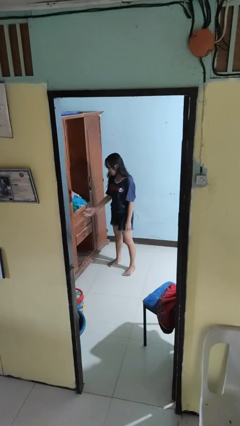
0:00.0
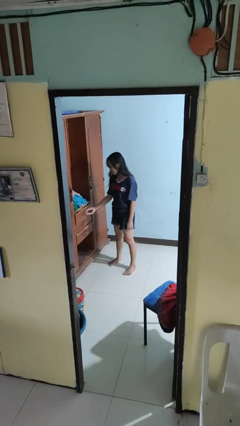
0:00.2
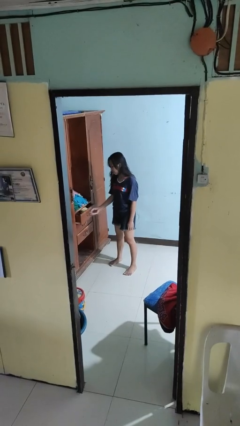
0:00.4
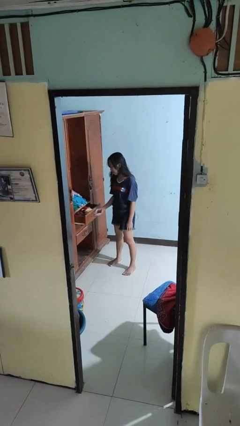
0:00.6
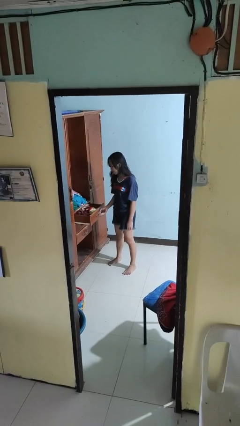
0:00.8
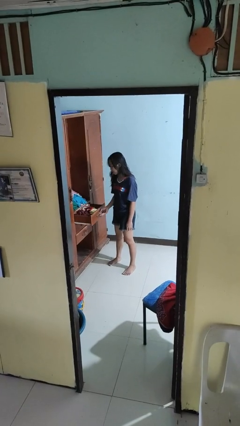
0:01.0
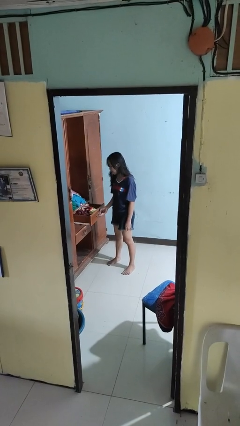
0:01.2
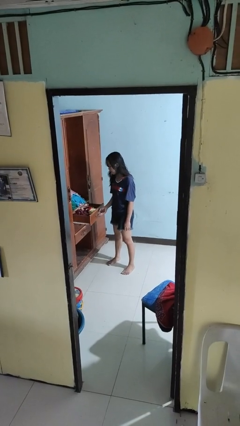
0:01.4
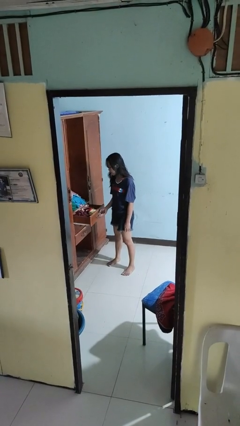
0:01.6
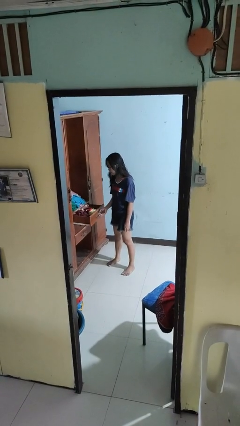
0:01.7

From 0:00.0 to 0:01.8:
person opens dresser drawer

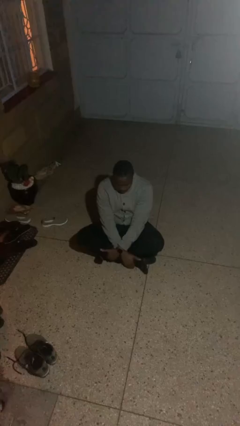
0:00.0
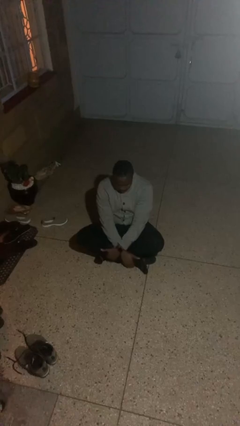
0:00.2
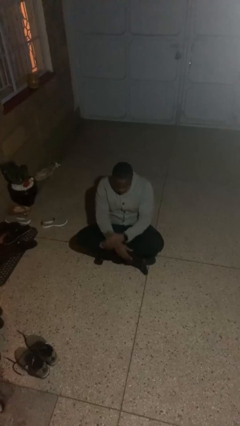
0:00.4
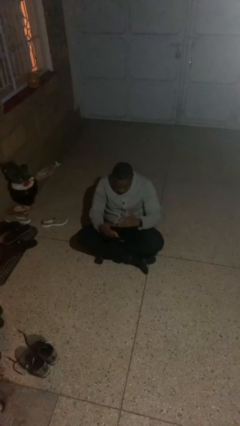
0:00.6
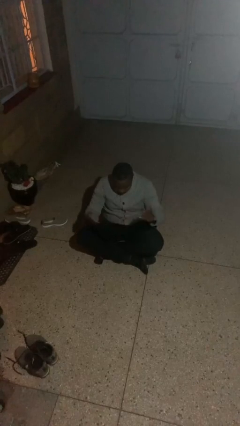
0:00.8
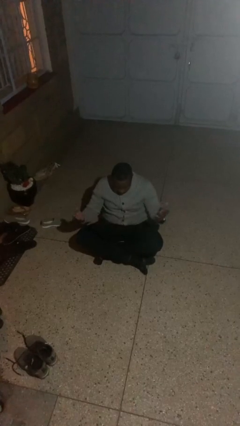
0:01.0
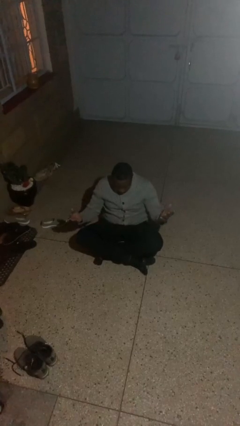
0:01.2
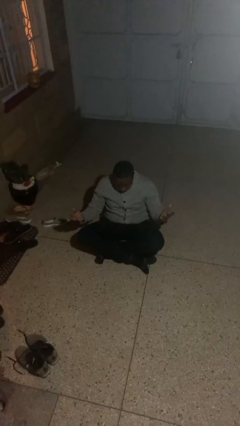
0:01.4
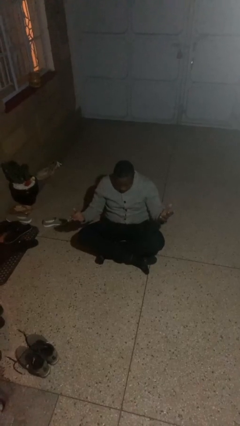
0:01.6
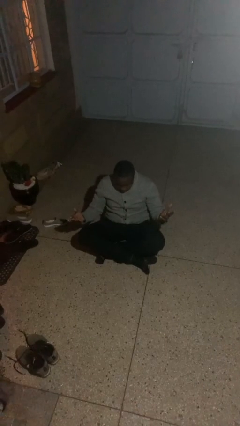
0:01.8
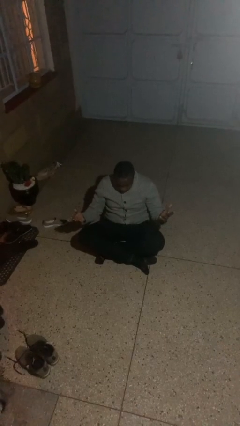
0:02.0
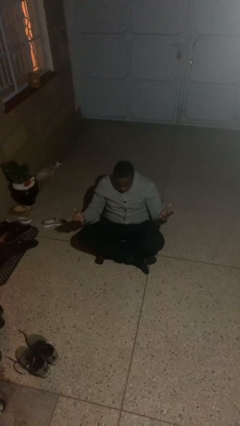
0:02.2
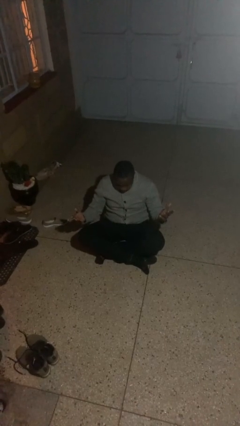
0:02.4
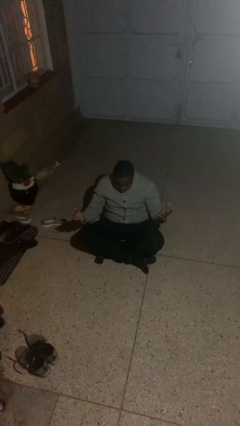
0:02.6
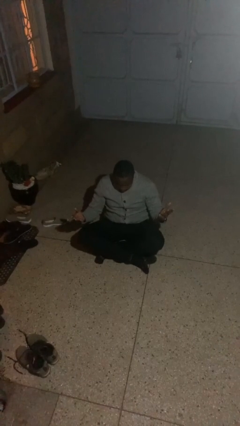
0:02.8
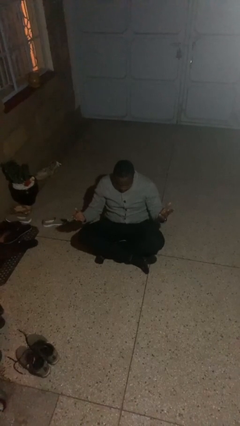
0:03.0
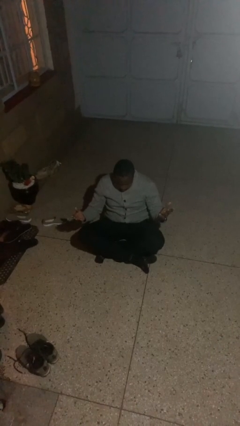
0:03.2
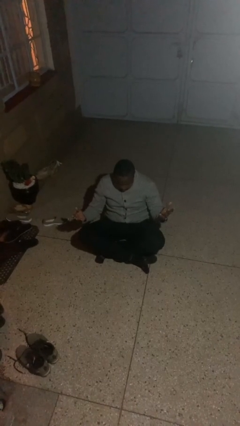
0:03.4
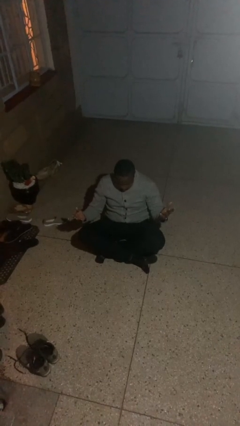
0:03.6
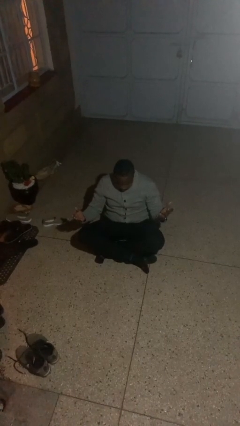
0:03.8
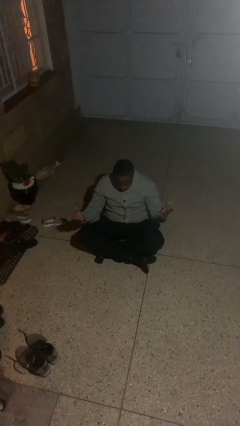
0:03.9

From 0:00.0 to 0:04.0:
person prays

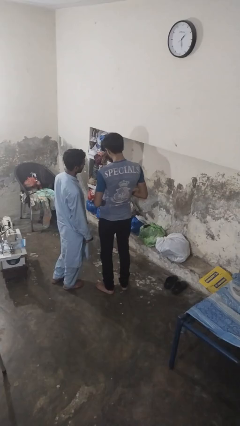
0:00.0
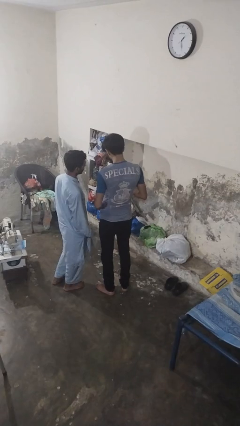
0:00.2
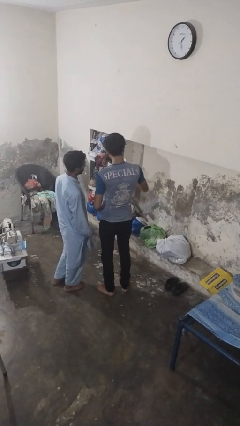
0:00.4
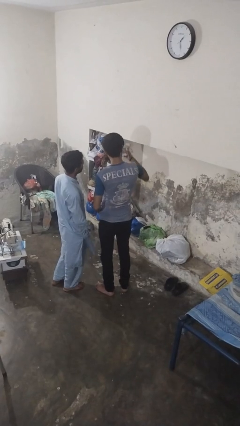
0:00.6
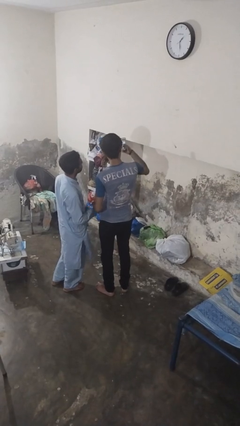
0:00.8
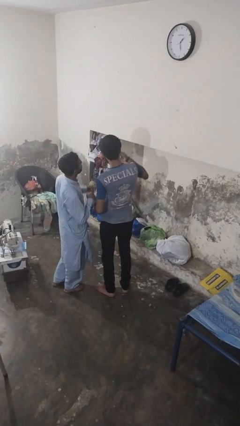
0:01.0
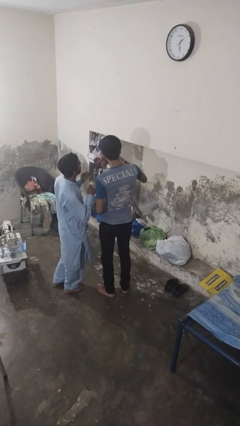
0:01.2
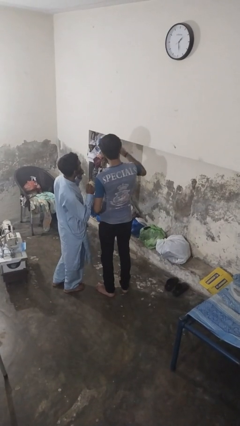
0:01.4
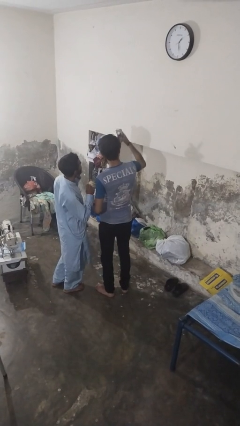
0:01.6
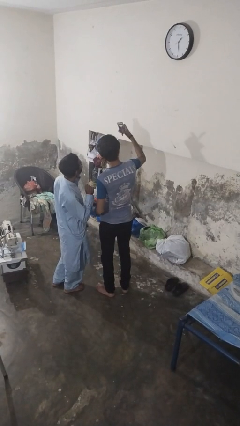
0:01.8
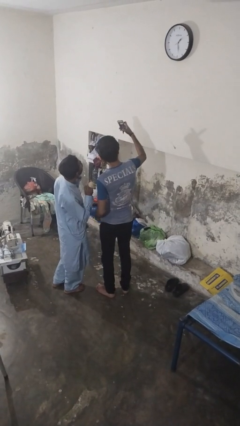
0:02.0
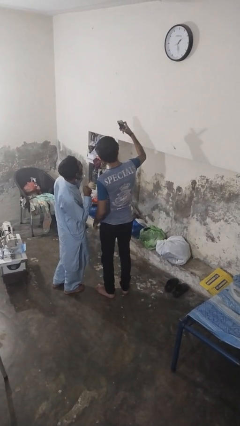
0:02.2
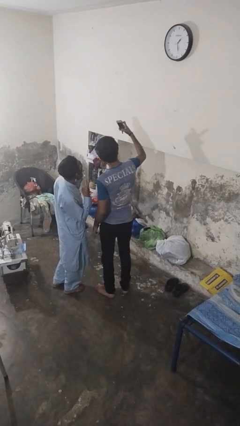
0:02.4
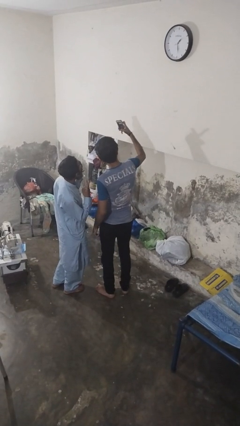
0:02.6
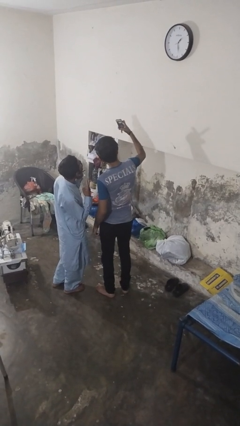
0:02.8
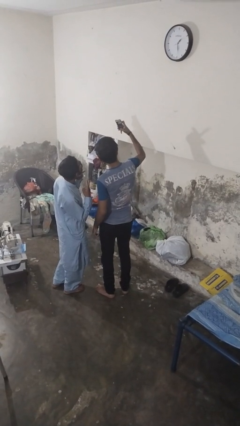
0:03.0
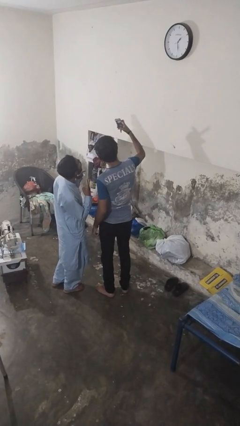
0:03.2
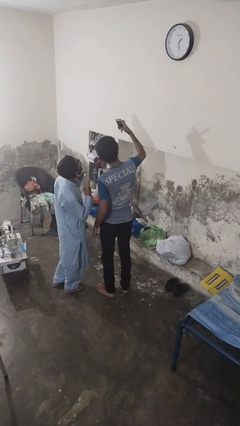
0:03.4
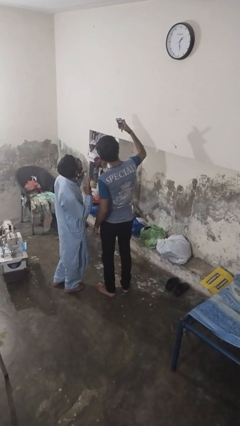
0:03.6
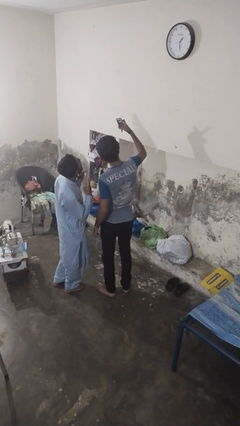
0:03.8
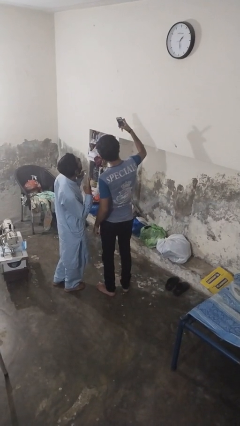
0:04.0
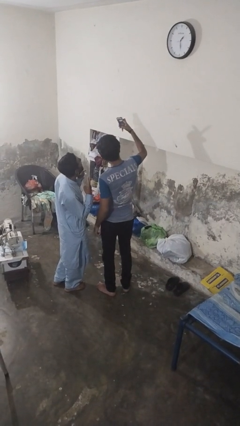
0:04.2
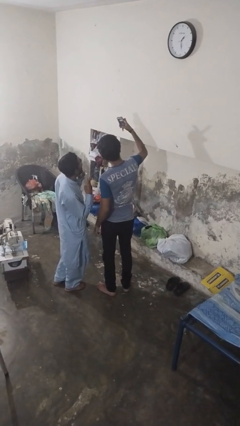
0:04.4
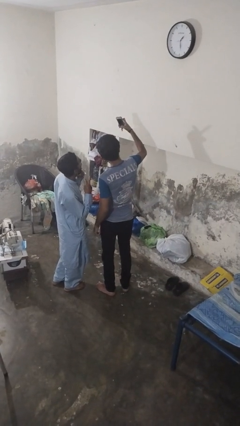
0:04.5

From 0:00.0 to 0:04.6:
person takes selfie with person

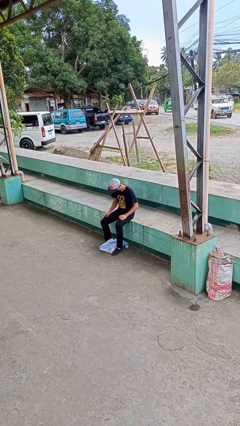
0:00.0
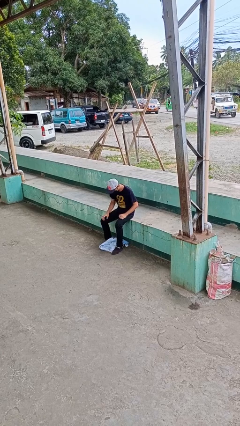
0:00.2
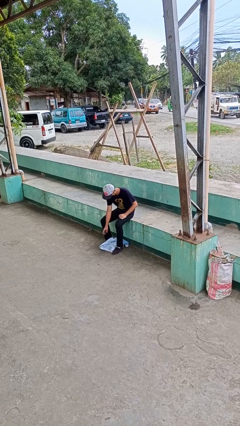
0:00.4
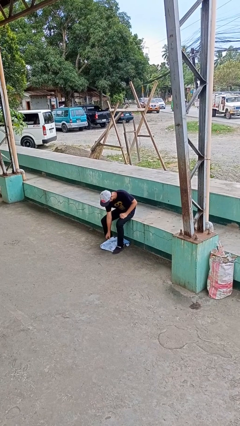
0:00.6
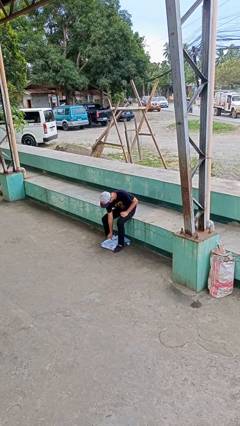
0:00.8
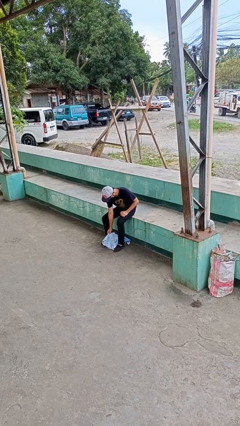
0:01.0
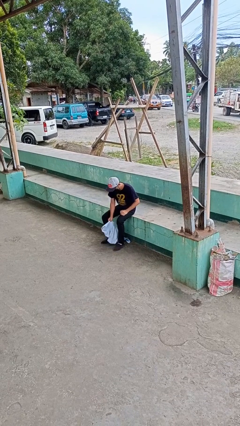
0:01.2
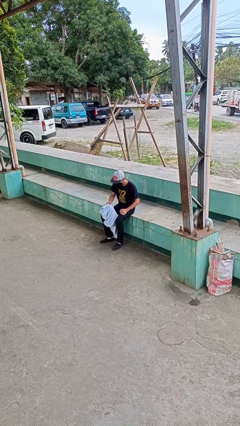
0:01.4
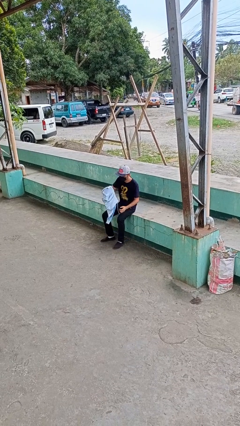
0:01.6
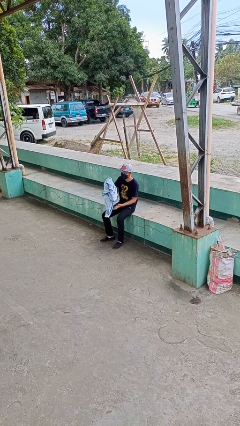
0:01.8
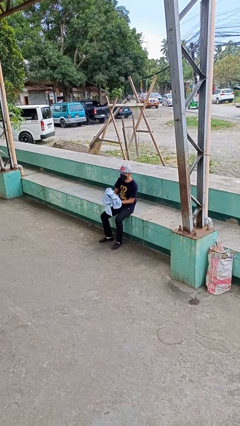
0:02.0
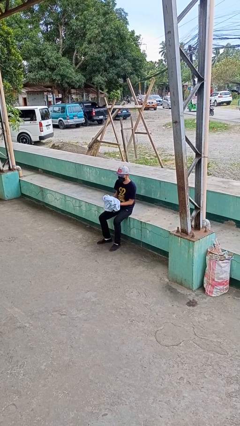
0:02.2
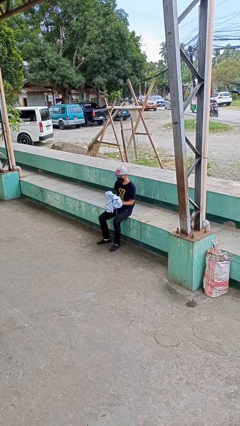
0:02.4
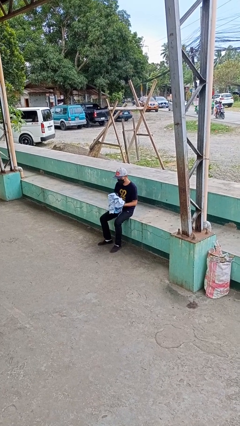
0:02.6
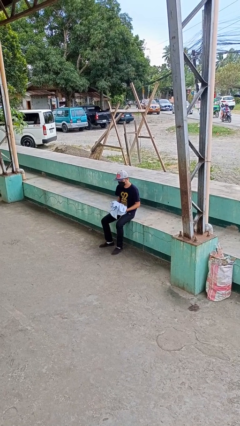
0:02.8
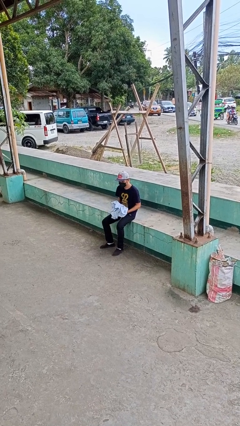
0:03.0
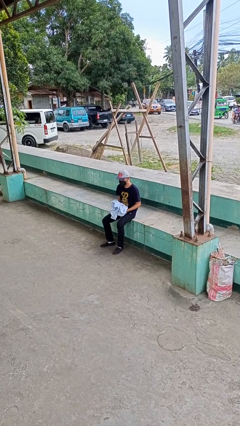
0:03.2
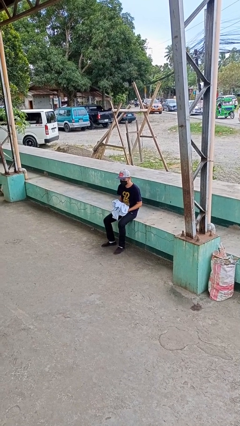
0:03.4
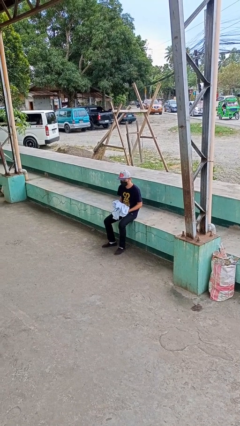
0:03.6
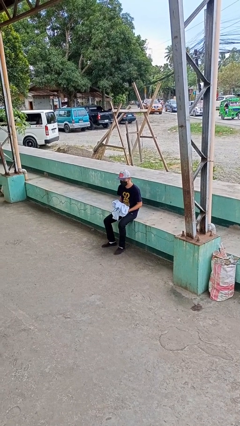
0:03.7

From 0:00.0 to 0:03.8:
person picks up object from floor

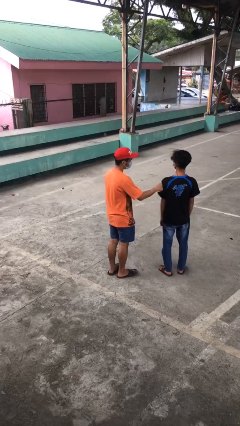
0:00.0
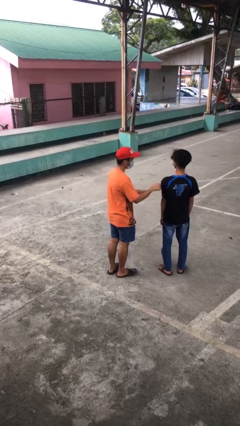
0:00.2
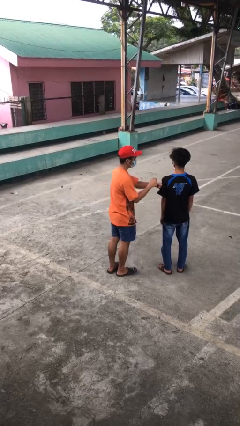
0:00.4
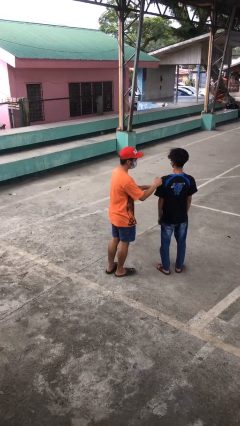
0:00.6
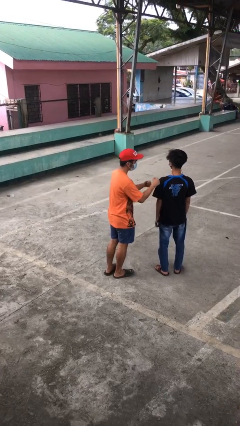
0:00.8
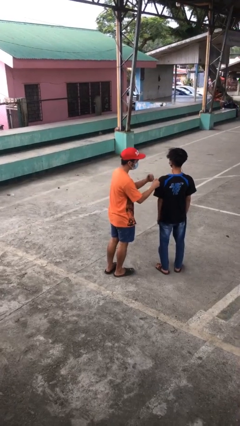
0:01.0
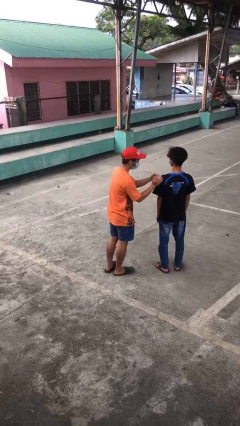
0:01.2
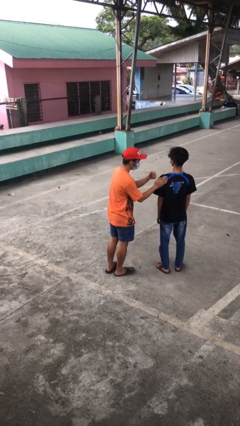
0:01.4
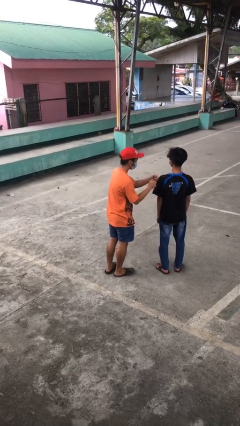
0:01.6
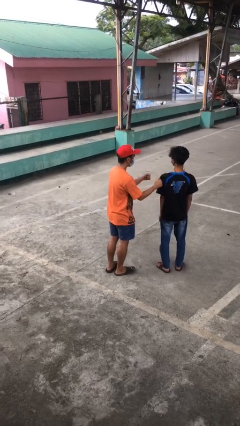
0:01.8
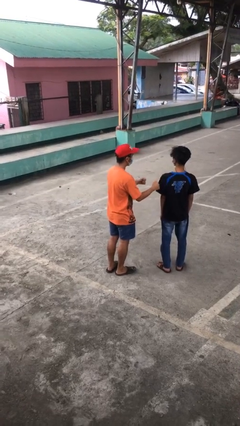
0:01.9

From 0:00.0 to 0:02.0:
person pounds shoulders of person

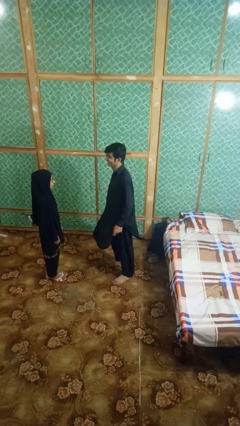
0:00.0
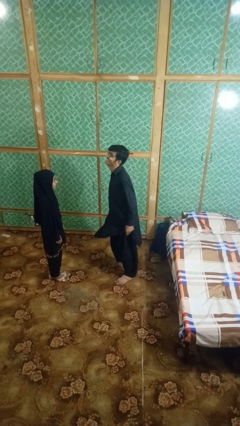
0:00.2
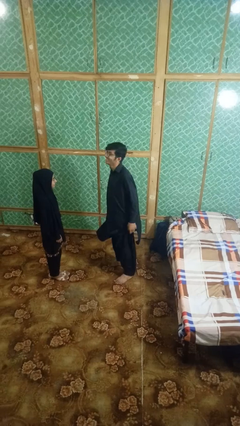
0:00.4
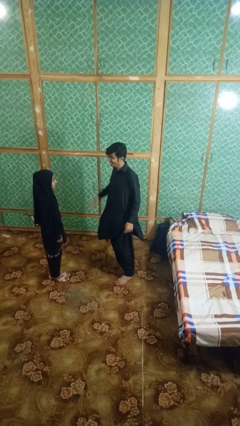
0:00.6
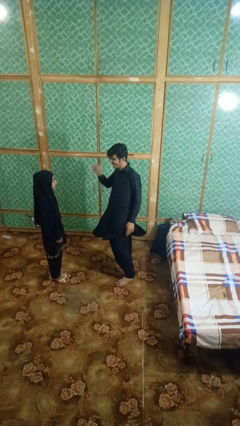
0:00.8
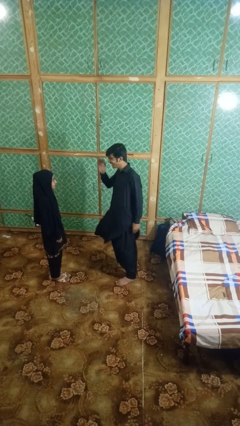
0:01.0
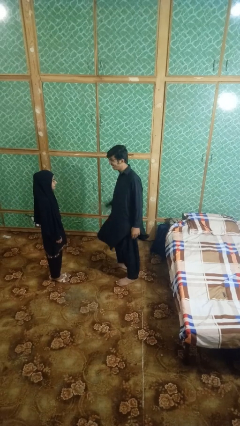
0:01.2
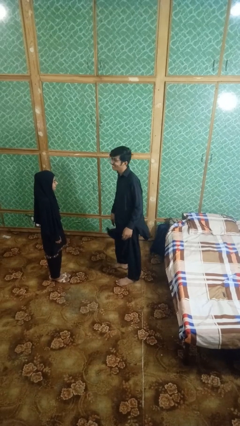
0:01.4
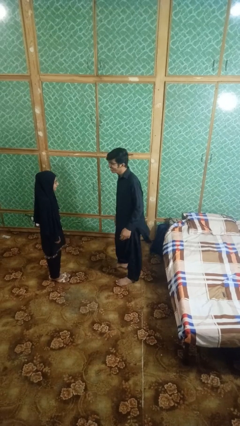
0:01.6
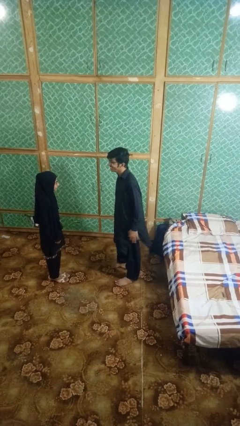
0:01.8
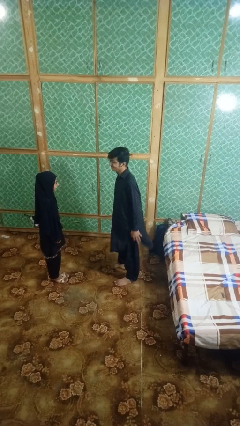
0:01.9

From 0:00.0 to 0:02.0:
person laughs with person
